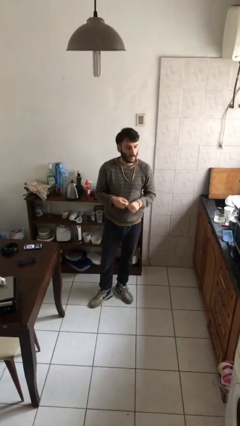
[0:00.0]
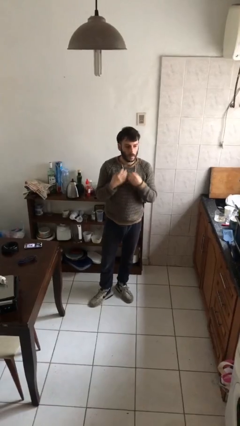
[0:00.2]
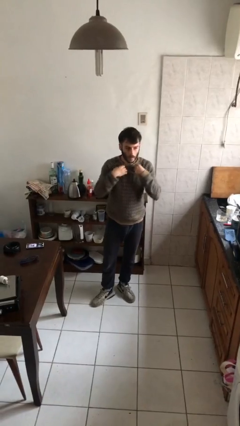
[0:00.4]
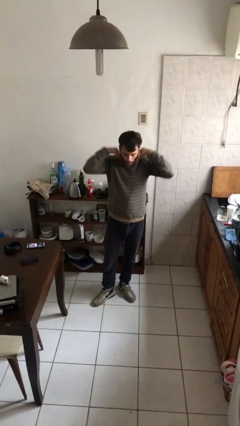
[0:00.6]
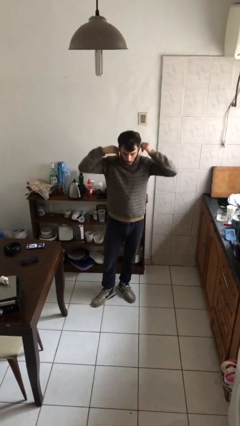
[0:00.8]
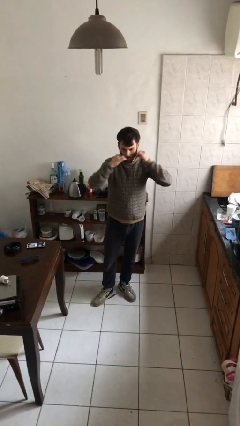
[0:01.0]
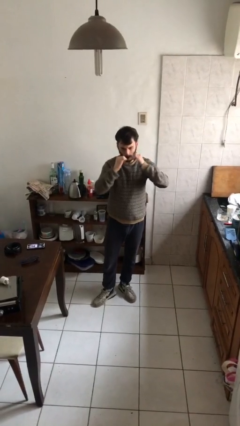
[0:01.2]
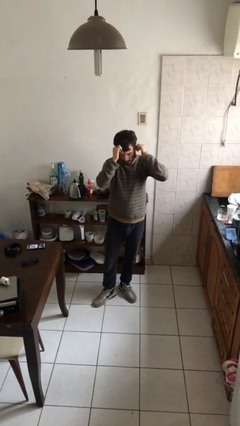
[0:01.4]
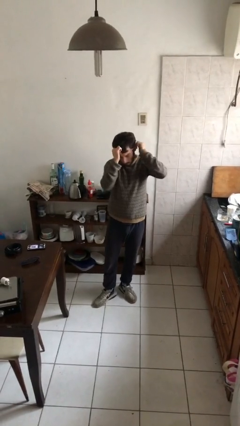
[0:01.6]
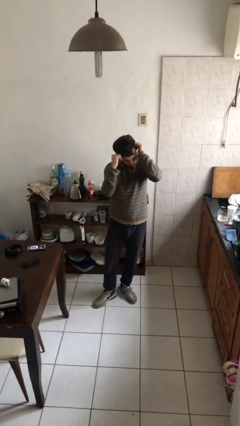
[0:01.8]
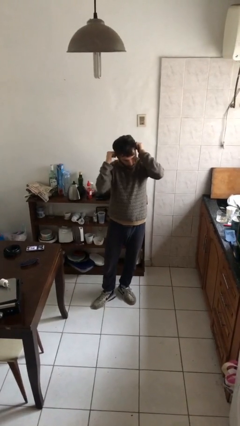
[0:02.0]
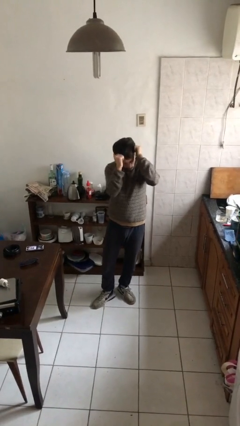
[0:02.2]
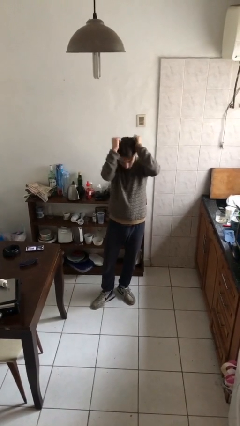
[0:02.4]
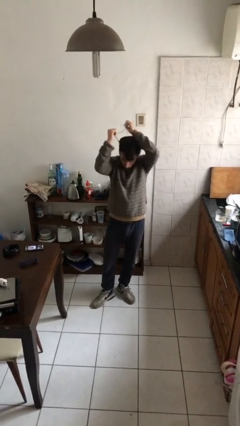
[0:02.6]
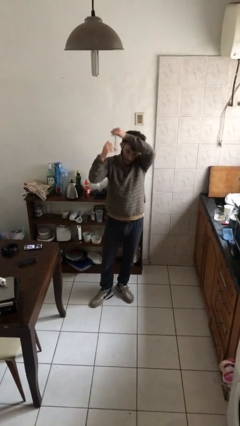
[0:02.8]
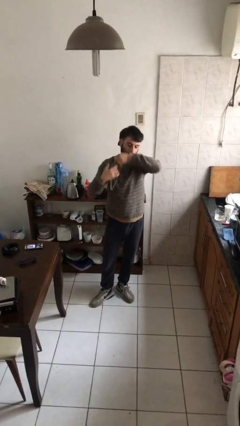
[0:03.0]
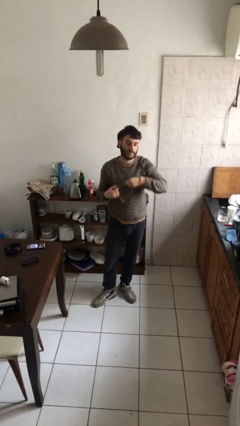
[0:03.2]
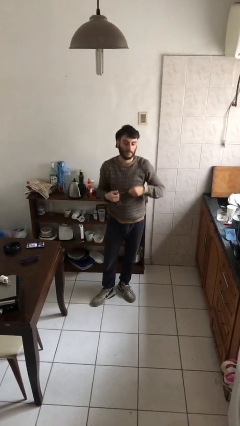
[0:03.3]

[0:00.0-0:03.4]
person takes off necklace

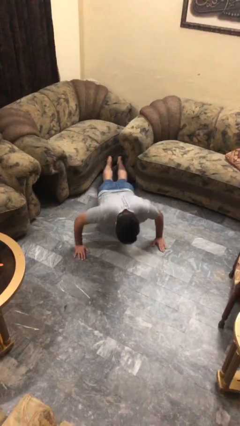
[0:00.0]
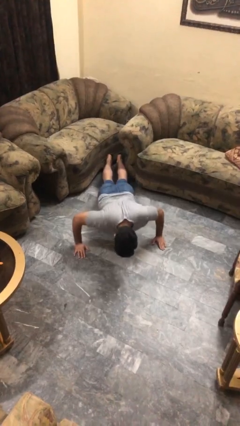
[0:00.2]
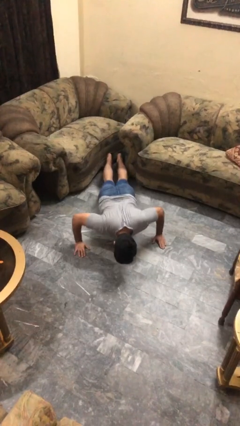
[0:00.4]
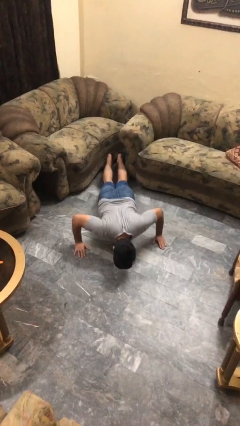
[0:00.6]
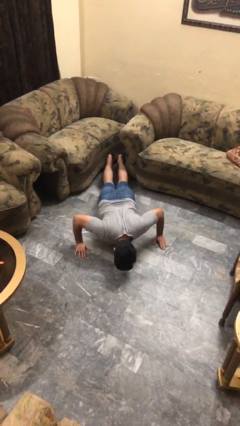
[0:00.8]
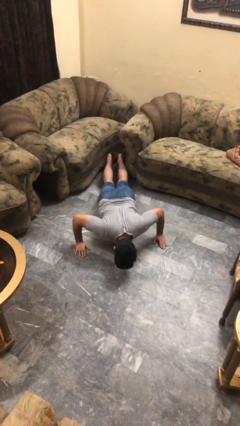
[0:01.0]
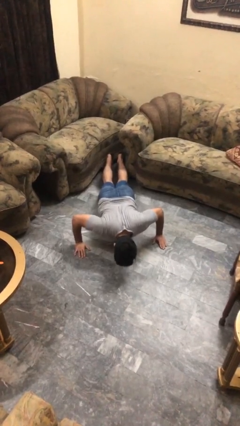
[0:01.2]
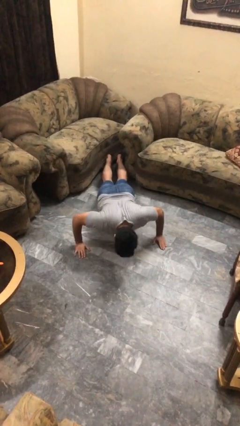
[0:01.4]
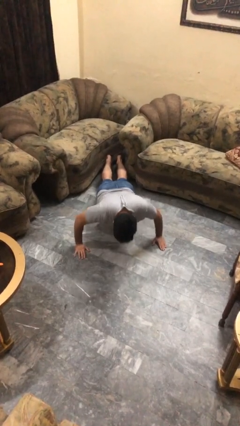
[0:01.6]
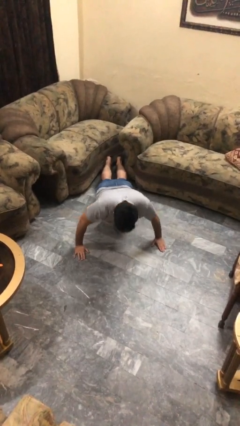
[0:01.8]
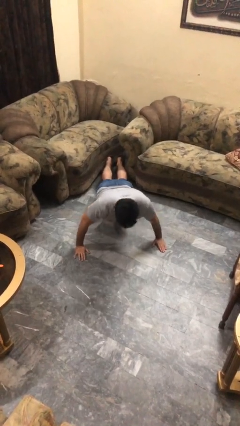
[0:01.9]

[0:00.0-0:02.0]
person exercises with pushup

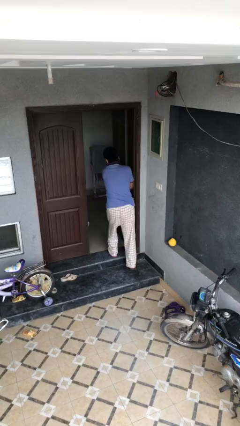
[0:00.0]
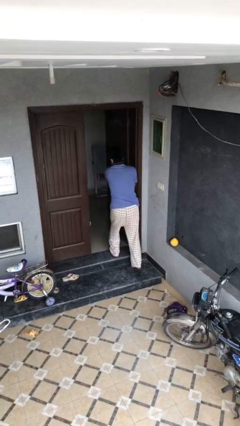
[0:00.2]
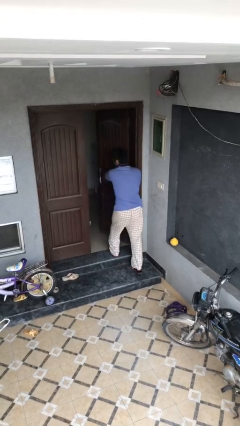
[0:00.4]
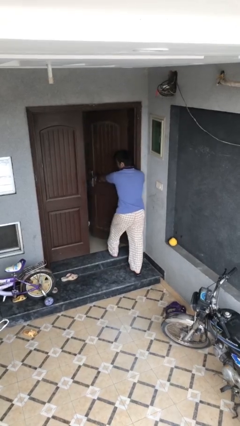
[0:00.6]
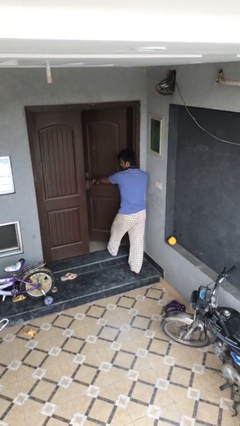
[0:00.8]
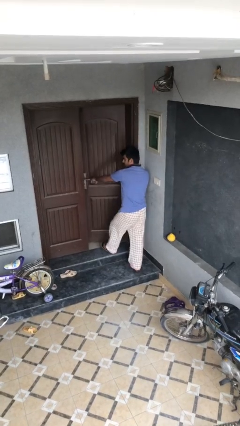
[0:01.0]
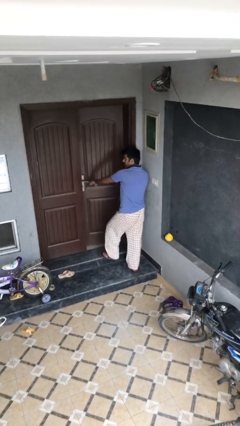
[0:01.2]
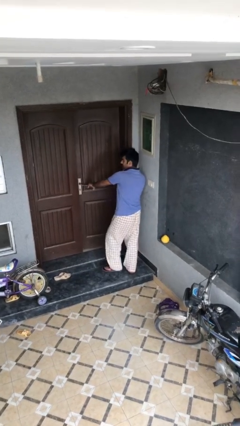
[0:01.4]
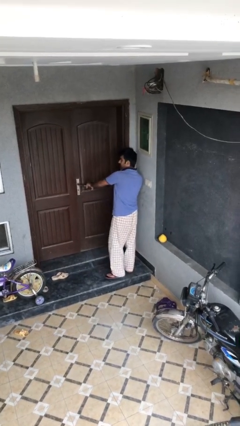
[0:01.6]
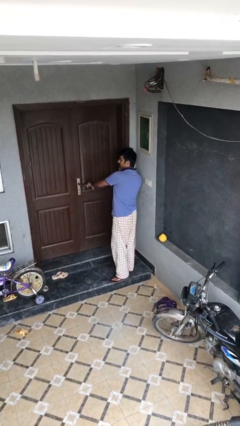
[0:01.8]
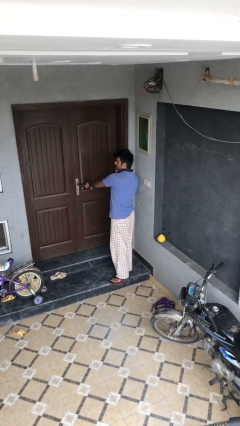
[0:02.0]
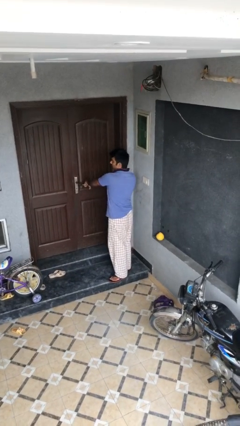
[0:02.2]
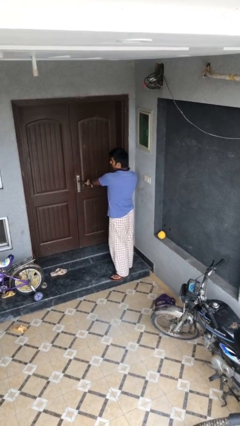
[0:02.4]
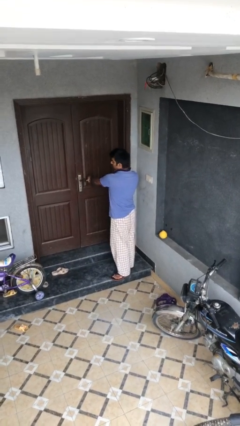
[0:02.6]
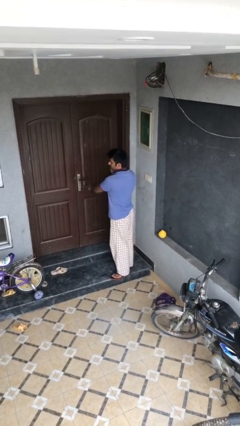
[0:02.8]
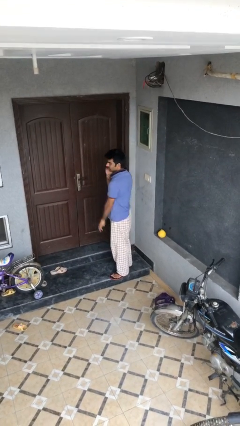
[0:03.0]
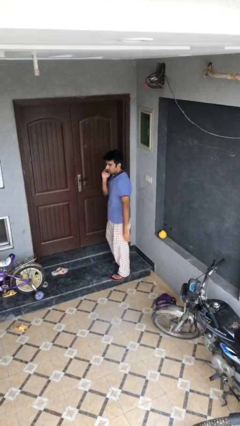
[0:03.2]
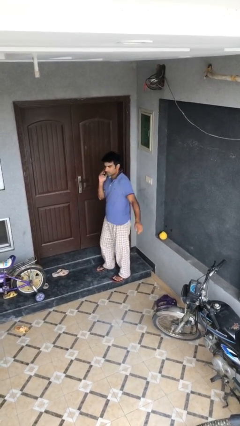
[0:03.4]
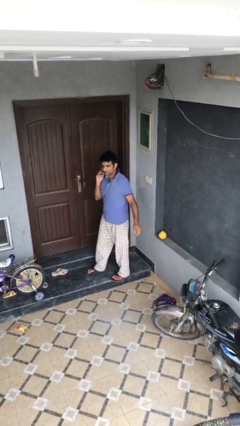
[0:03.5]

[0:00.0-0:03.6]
person closes facility door

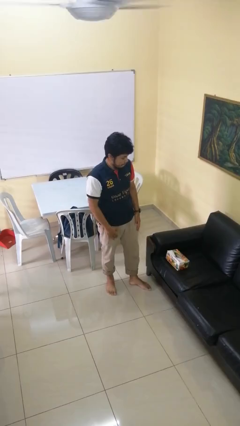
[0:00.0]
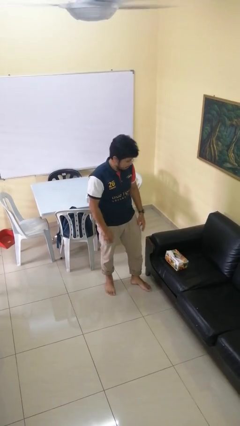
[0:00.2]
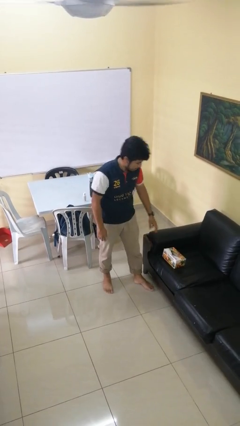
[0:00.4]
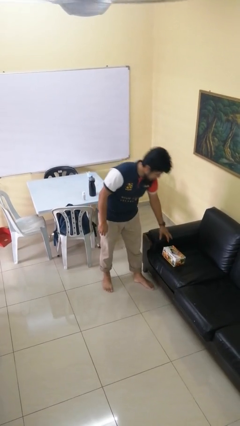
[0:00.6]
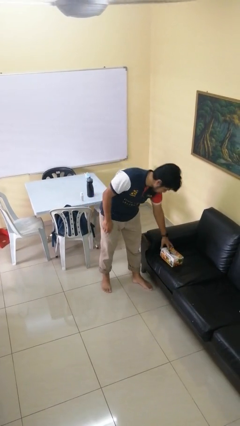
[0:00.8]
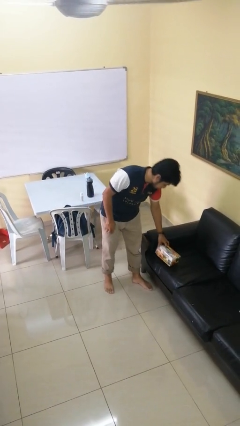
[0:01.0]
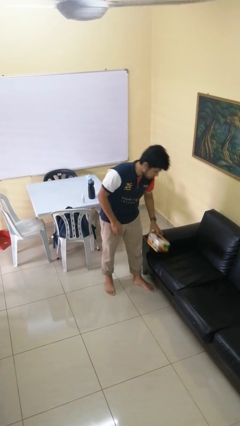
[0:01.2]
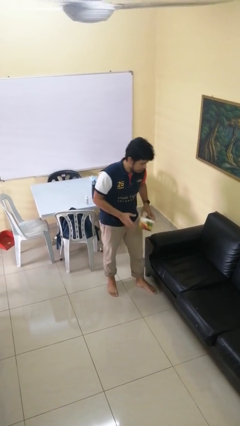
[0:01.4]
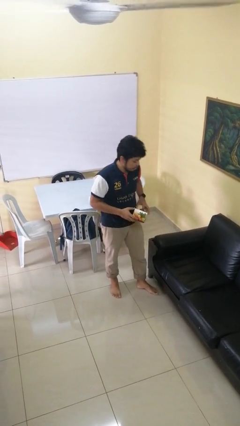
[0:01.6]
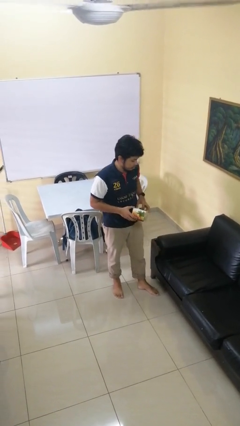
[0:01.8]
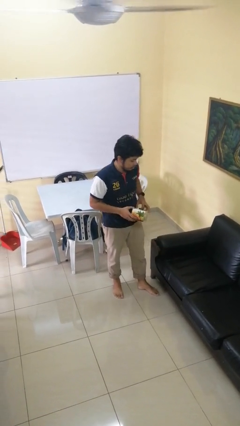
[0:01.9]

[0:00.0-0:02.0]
person picks up object from couch

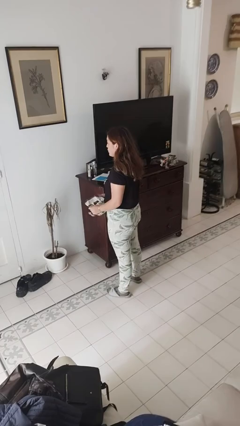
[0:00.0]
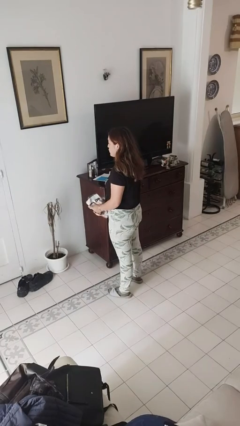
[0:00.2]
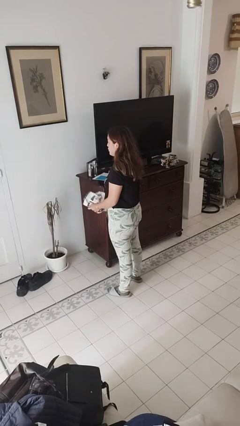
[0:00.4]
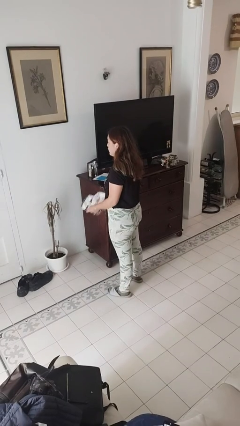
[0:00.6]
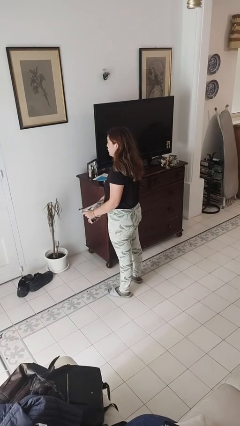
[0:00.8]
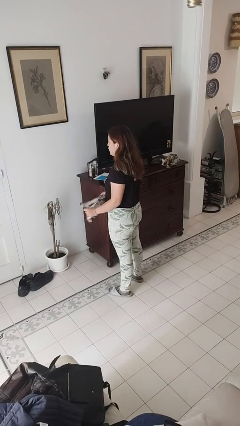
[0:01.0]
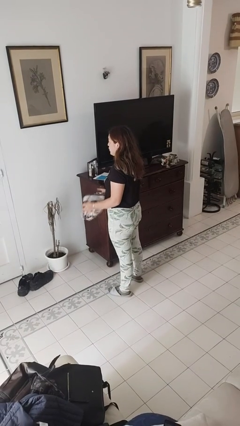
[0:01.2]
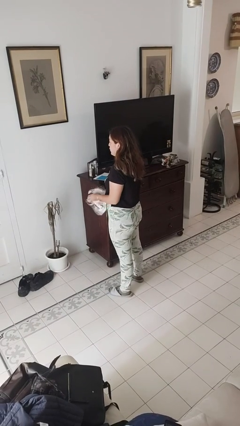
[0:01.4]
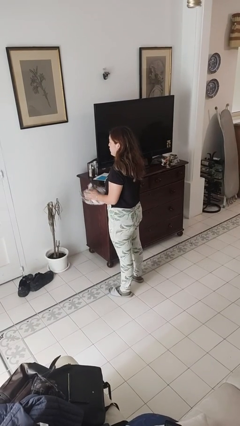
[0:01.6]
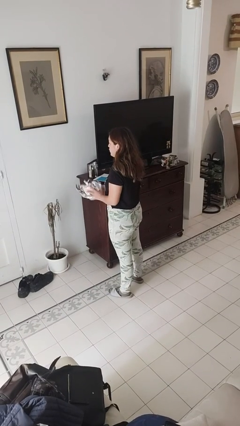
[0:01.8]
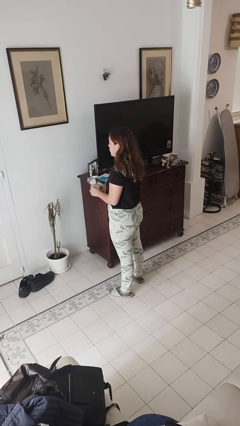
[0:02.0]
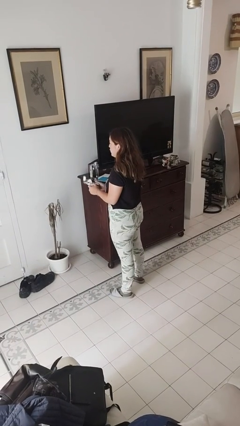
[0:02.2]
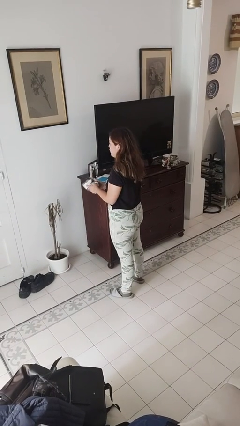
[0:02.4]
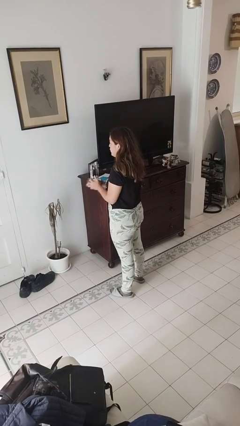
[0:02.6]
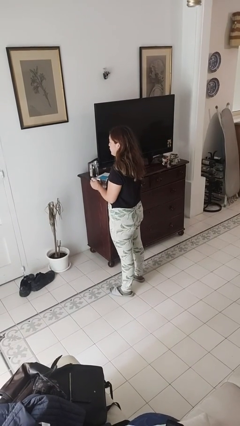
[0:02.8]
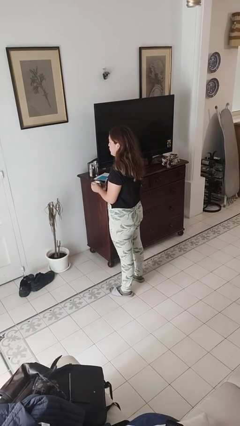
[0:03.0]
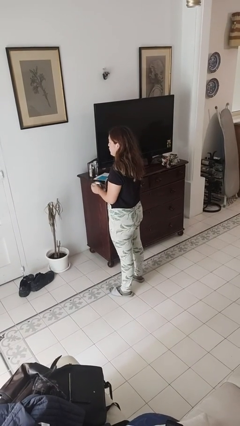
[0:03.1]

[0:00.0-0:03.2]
person crumples paper

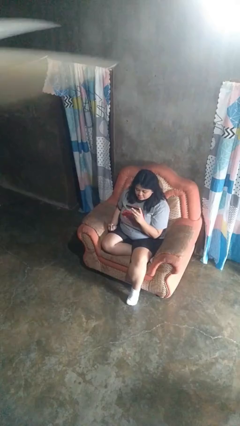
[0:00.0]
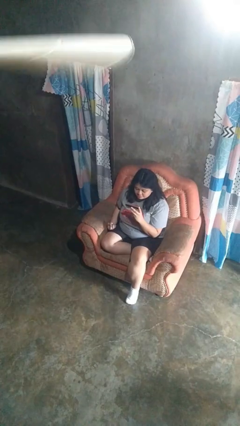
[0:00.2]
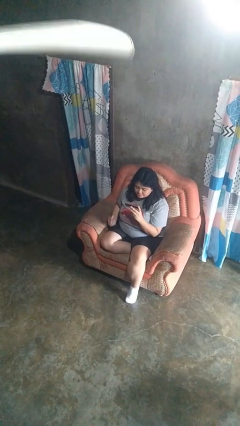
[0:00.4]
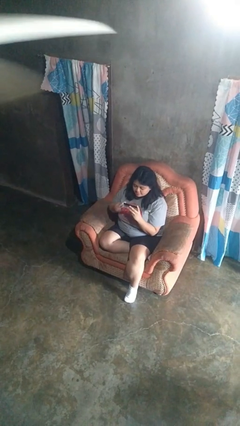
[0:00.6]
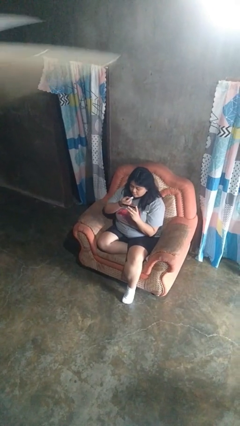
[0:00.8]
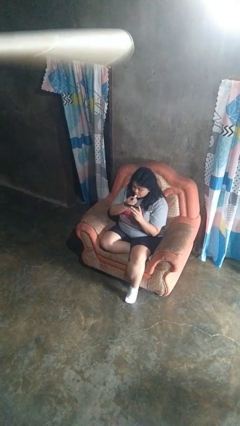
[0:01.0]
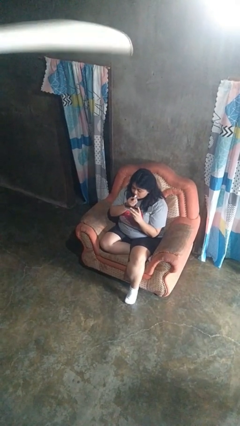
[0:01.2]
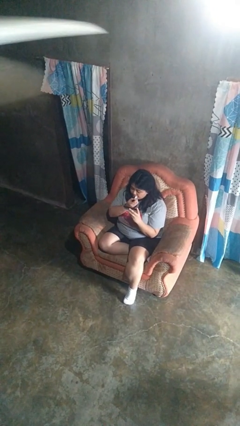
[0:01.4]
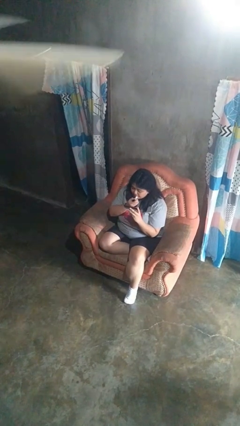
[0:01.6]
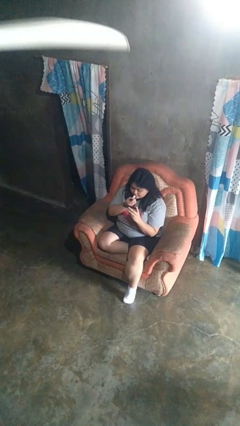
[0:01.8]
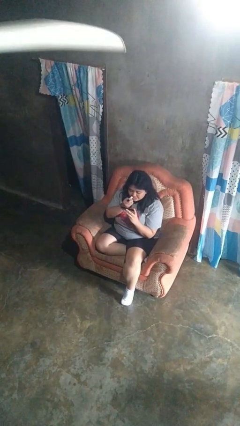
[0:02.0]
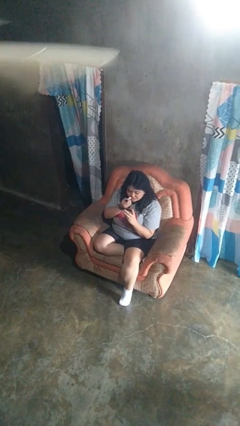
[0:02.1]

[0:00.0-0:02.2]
person applies lip makeup

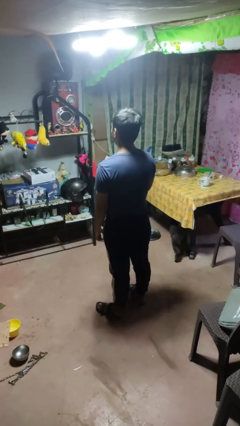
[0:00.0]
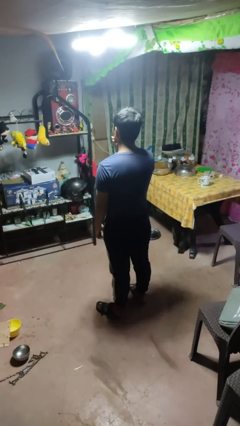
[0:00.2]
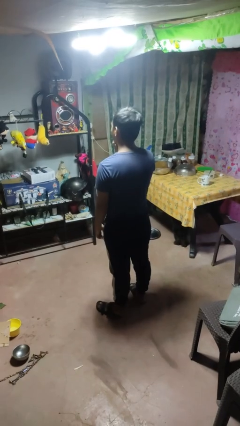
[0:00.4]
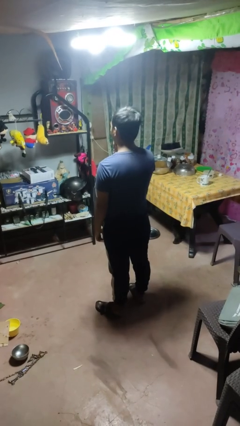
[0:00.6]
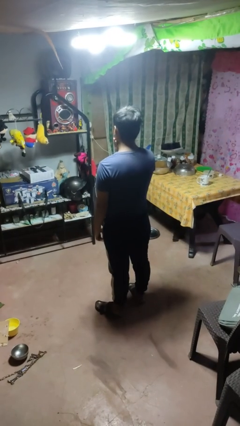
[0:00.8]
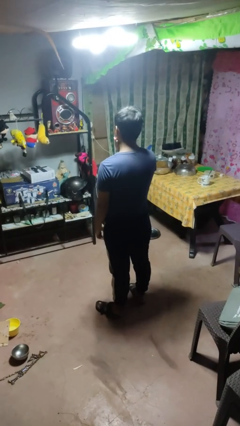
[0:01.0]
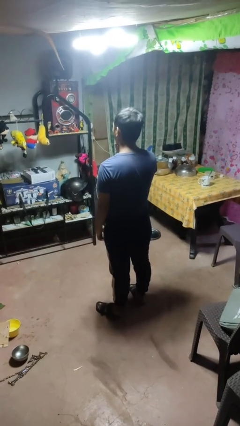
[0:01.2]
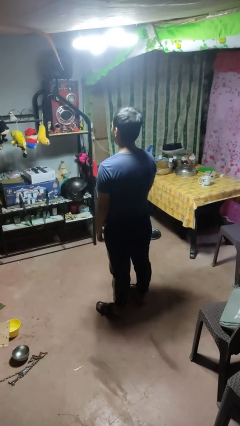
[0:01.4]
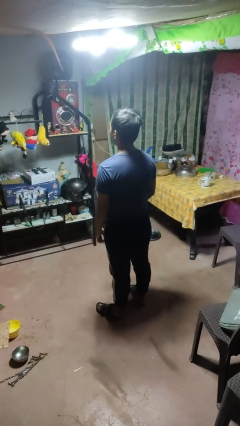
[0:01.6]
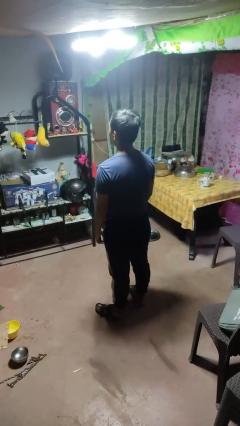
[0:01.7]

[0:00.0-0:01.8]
person strokes chin
